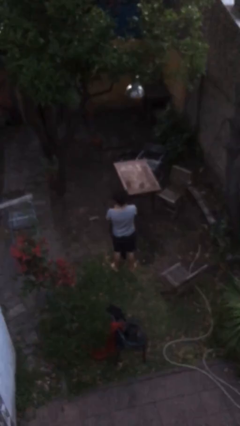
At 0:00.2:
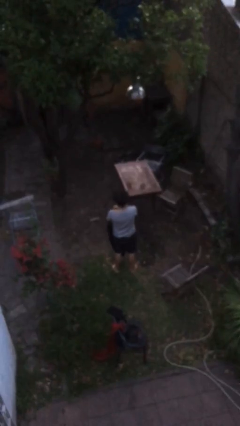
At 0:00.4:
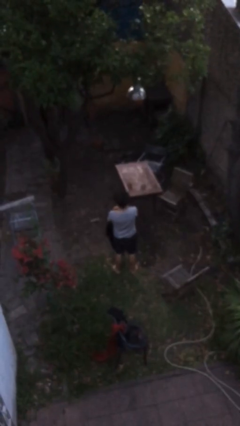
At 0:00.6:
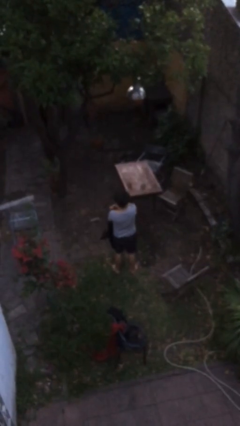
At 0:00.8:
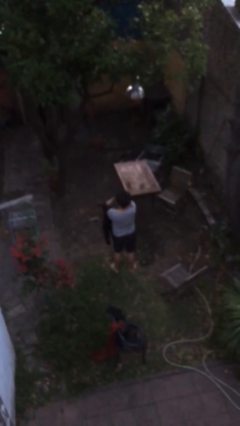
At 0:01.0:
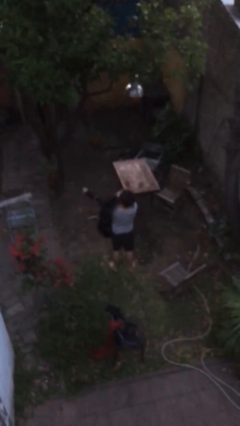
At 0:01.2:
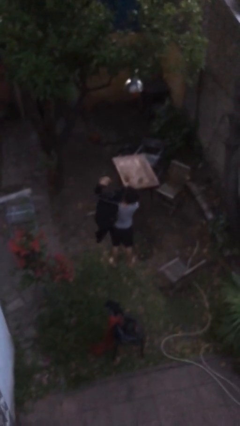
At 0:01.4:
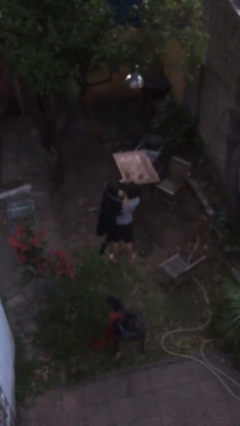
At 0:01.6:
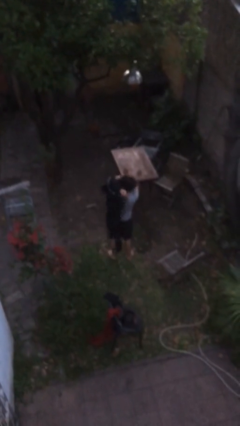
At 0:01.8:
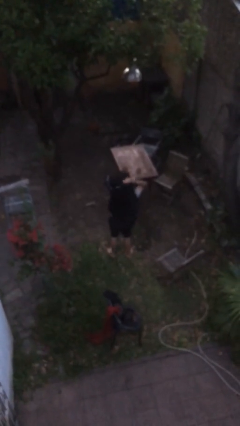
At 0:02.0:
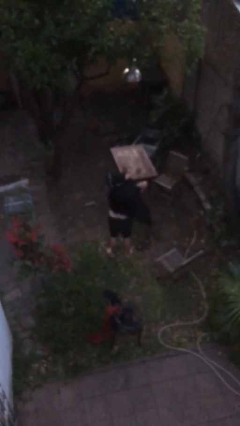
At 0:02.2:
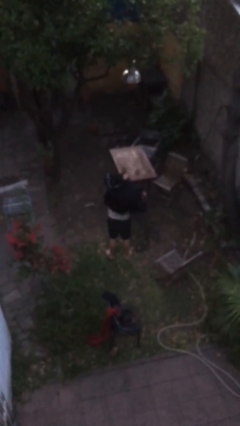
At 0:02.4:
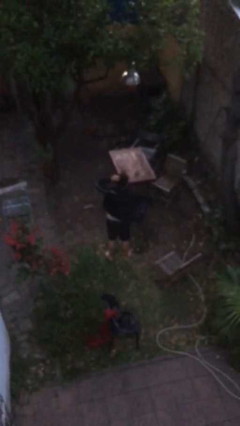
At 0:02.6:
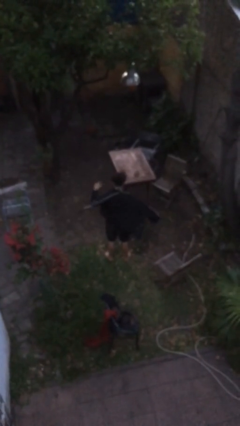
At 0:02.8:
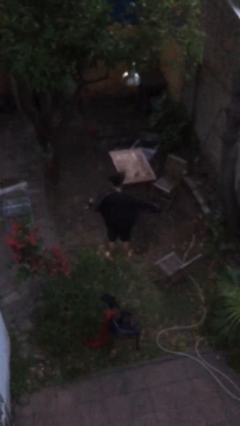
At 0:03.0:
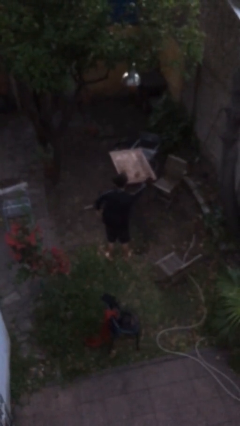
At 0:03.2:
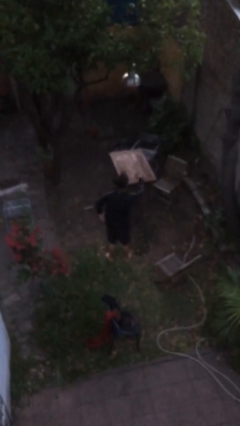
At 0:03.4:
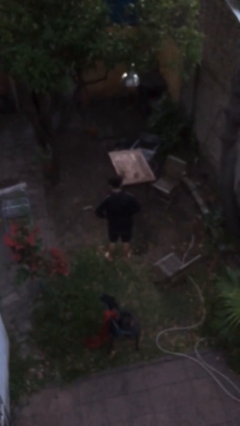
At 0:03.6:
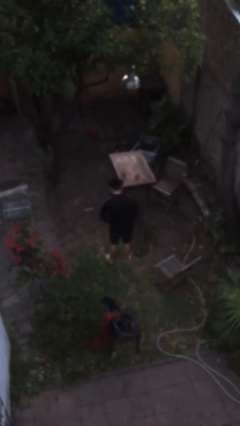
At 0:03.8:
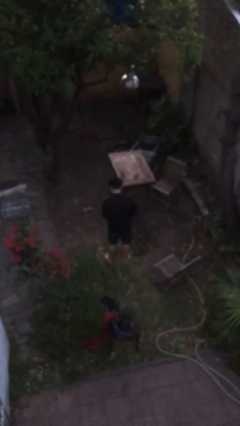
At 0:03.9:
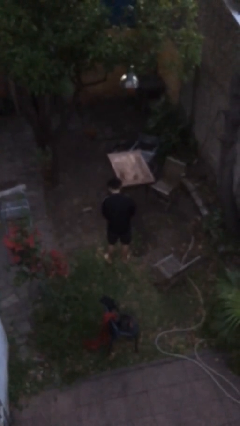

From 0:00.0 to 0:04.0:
person puts on jacket

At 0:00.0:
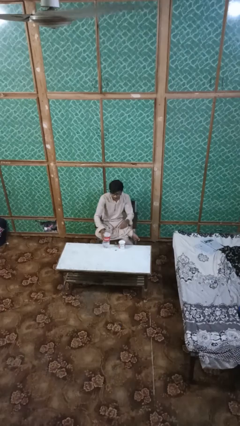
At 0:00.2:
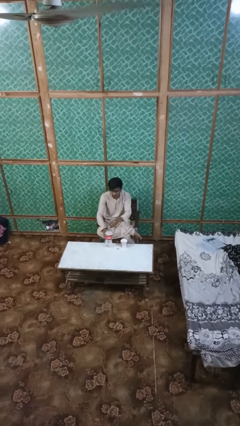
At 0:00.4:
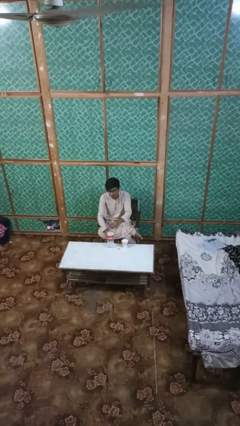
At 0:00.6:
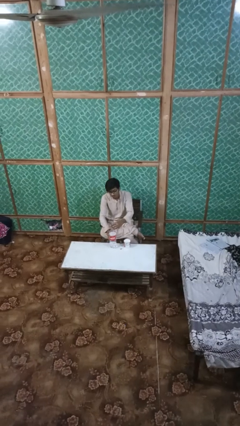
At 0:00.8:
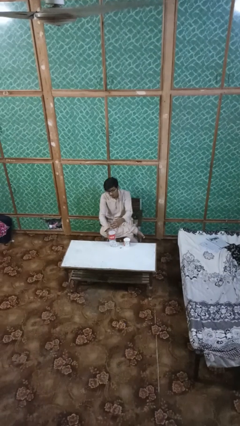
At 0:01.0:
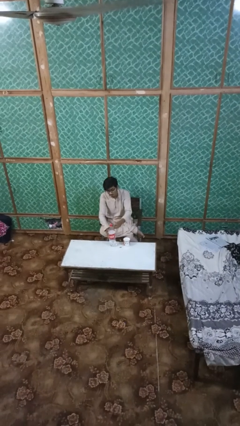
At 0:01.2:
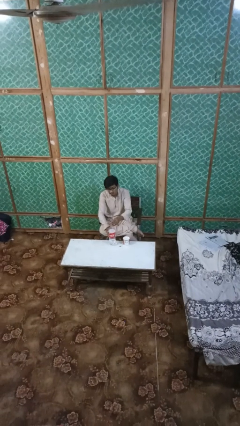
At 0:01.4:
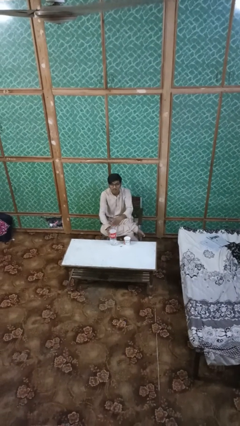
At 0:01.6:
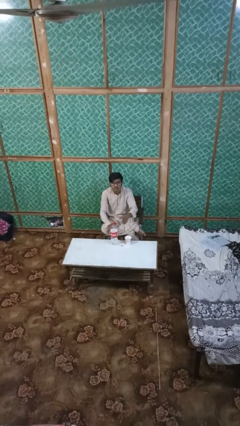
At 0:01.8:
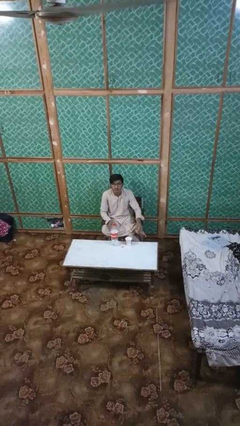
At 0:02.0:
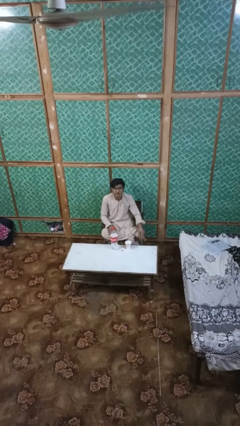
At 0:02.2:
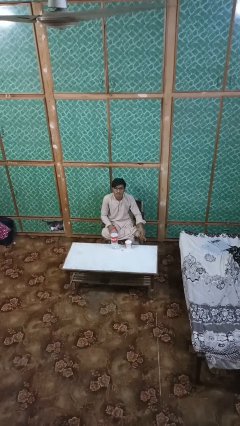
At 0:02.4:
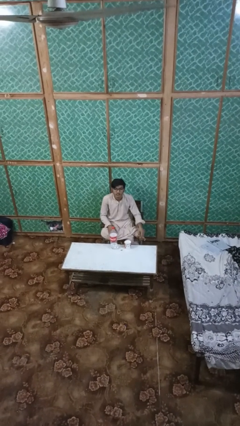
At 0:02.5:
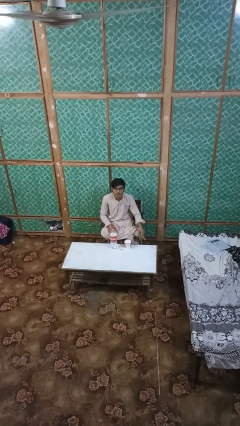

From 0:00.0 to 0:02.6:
person screws lid to bottle

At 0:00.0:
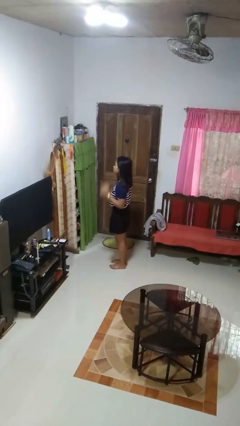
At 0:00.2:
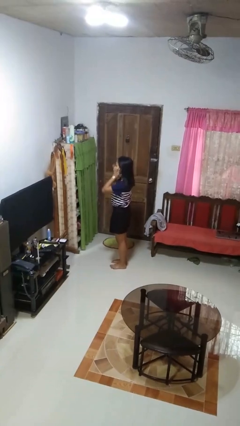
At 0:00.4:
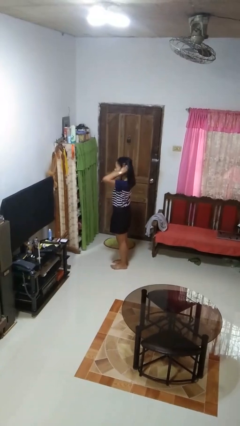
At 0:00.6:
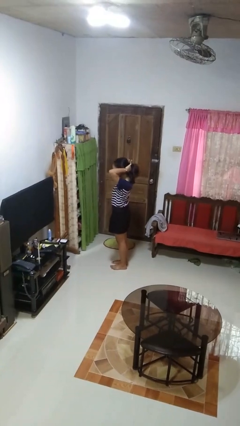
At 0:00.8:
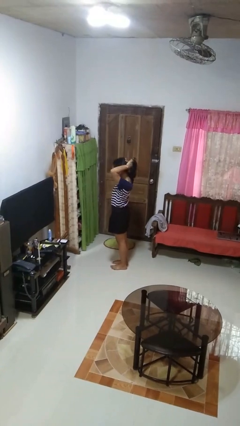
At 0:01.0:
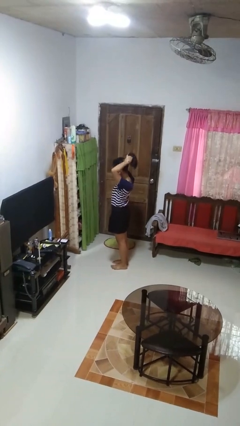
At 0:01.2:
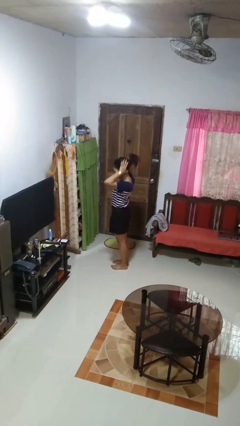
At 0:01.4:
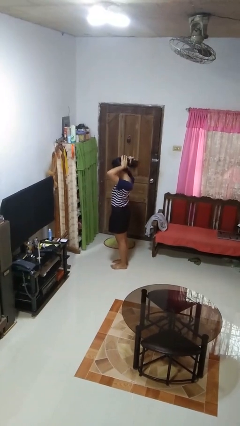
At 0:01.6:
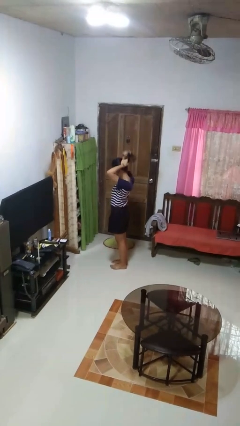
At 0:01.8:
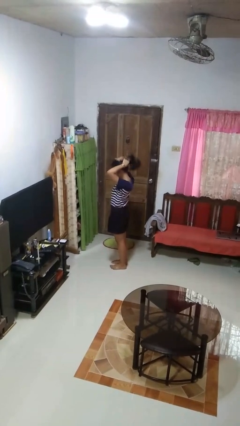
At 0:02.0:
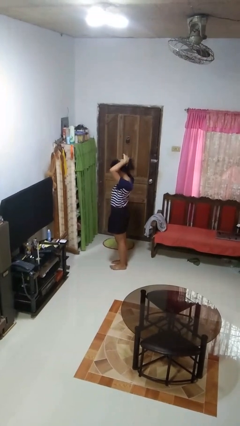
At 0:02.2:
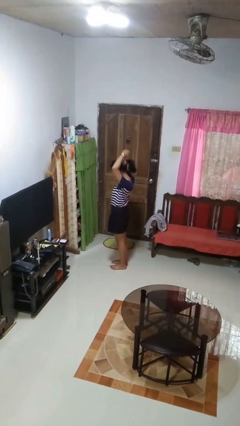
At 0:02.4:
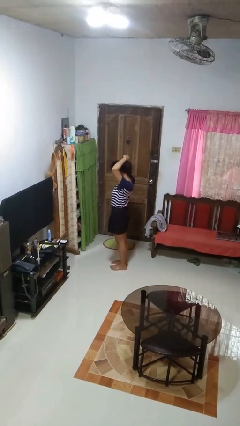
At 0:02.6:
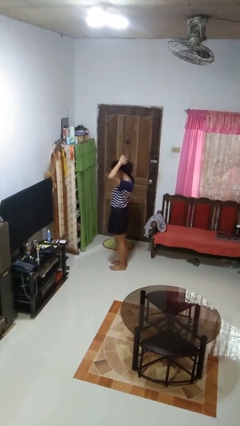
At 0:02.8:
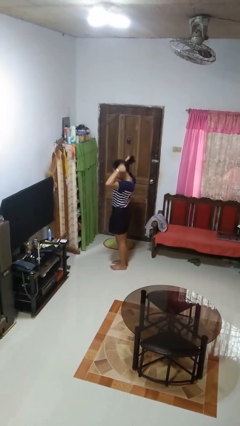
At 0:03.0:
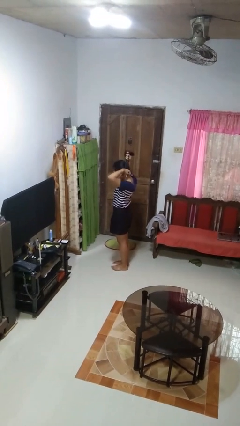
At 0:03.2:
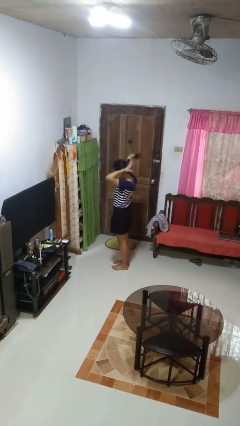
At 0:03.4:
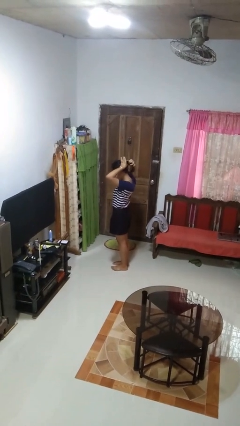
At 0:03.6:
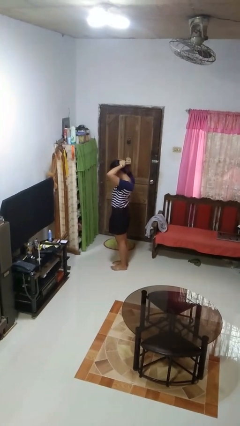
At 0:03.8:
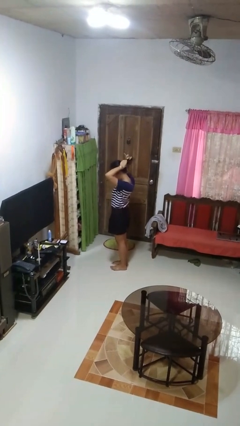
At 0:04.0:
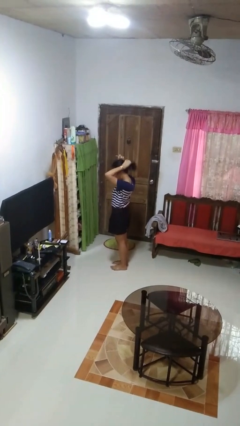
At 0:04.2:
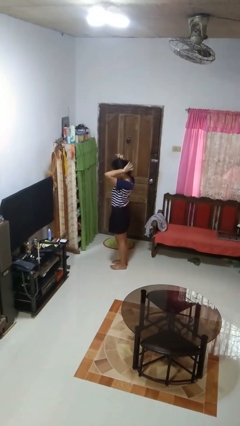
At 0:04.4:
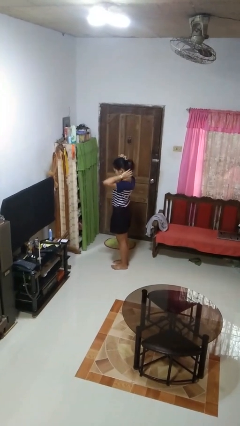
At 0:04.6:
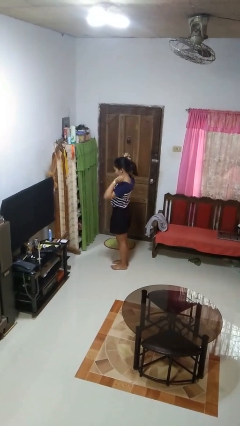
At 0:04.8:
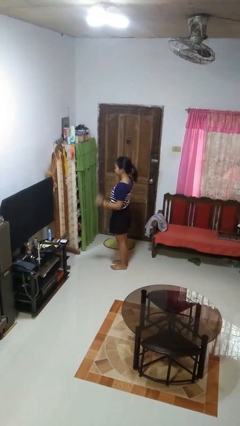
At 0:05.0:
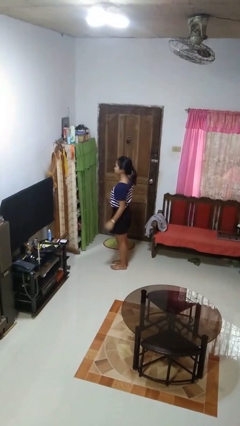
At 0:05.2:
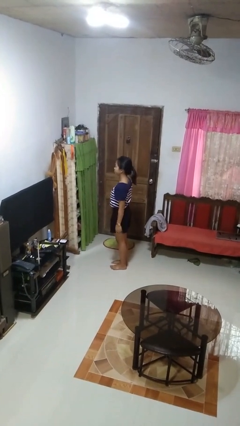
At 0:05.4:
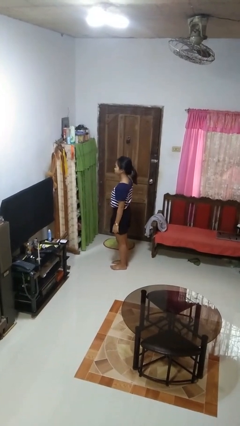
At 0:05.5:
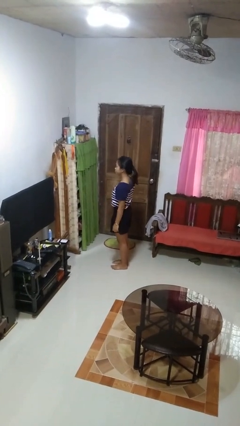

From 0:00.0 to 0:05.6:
person puts hair in ponytail

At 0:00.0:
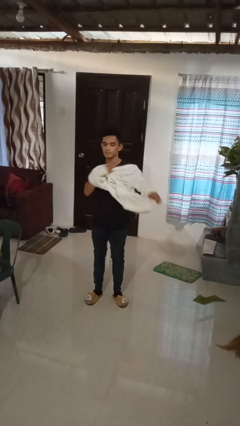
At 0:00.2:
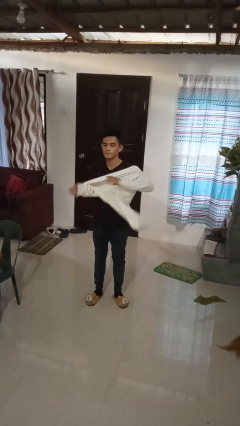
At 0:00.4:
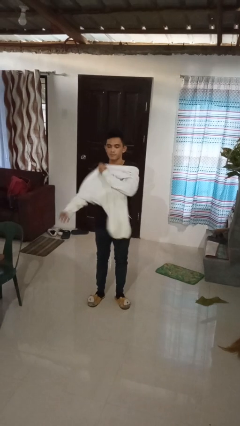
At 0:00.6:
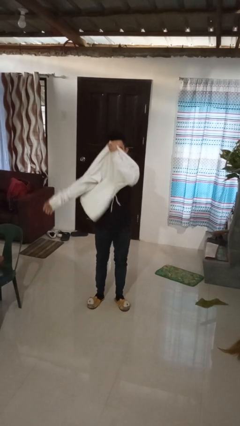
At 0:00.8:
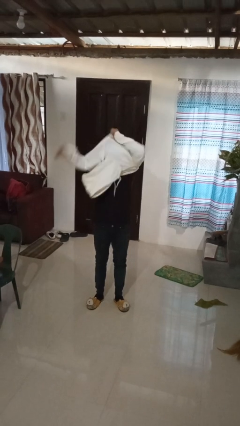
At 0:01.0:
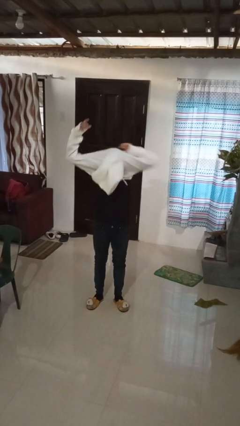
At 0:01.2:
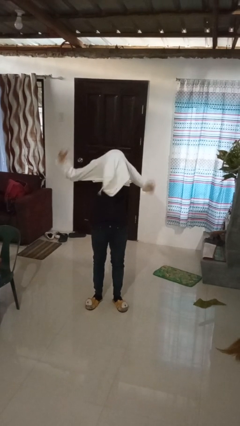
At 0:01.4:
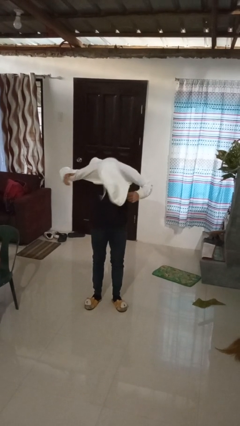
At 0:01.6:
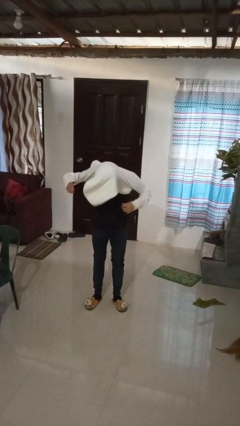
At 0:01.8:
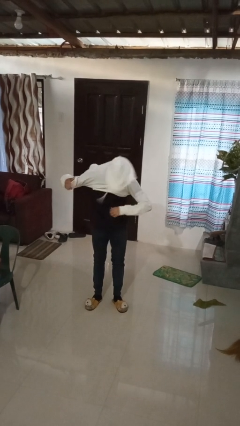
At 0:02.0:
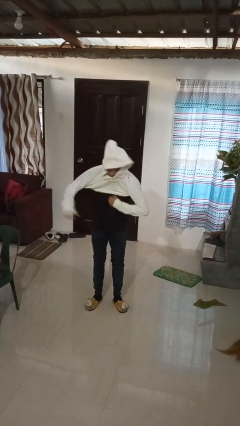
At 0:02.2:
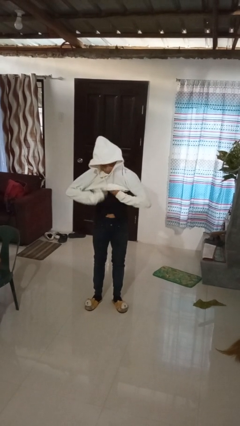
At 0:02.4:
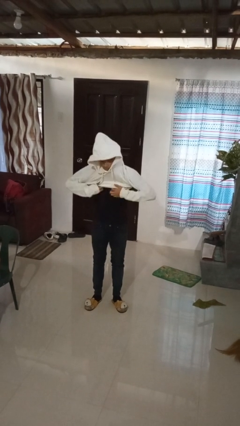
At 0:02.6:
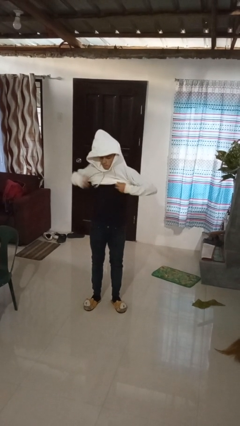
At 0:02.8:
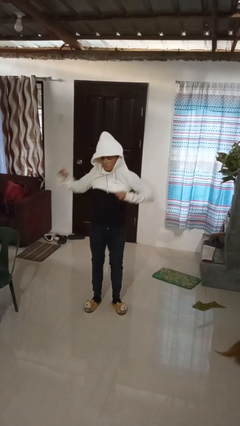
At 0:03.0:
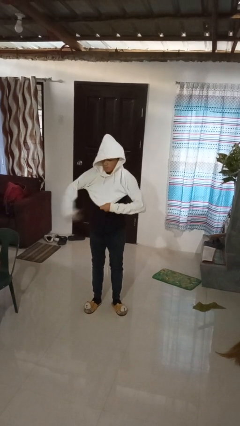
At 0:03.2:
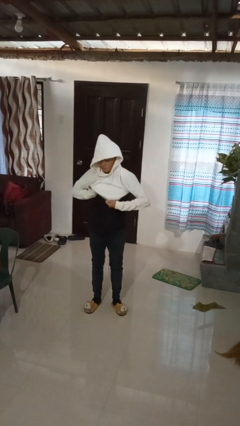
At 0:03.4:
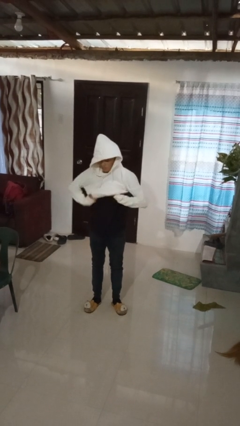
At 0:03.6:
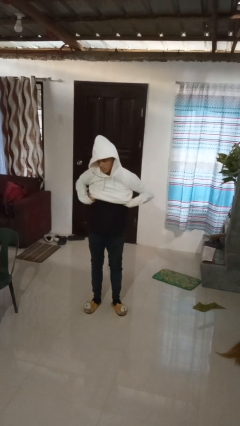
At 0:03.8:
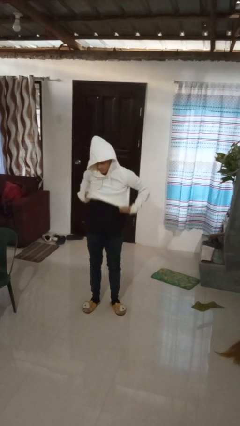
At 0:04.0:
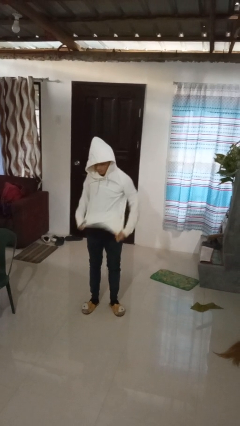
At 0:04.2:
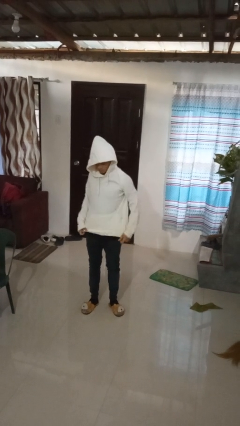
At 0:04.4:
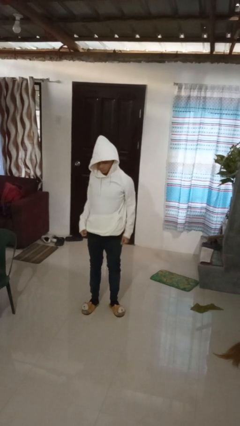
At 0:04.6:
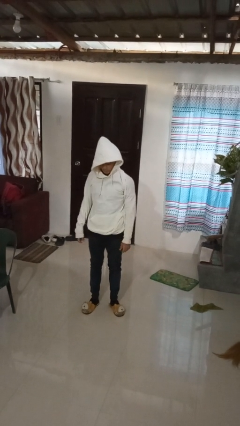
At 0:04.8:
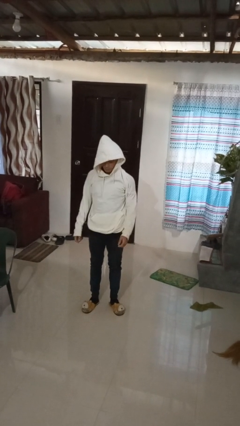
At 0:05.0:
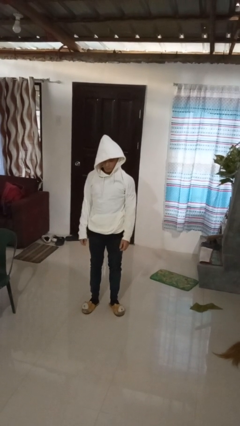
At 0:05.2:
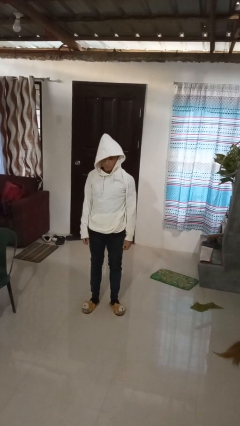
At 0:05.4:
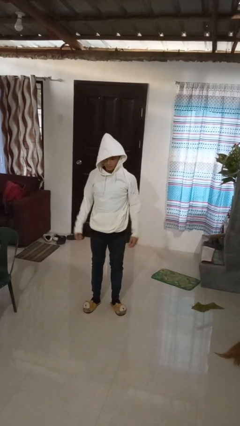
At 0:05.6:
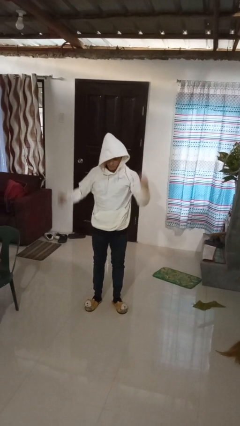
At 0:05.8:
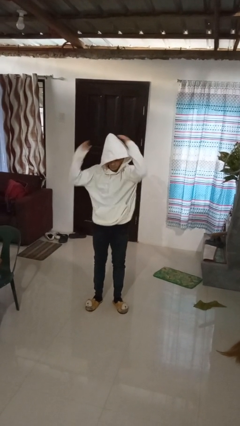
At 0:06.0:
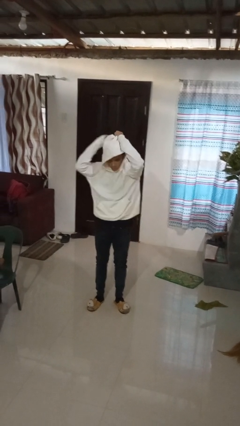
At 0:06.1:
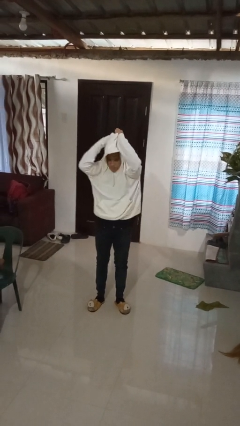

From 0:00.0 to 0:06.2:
person puts on hoodie
